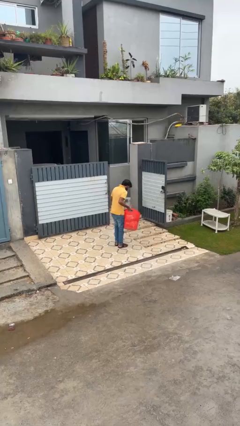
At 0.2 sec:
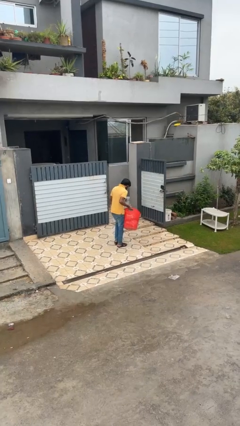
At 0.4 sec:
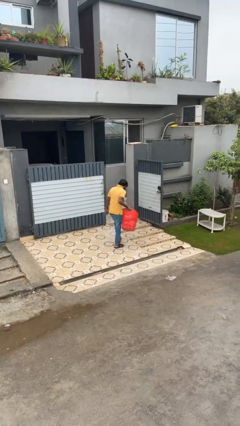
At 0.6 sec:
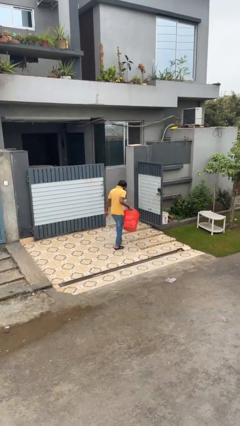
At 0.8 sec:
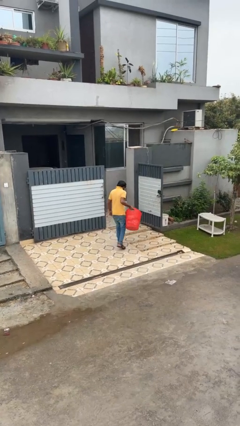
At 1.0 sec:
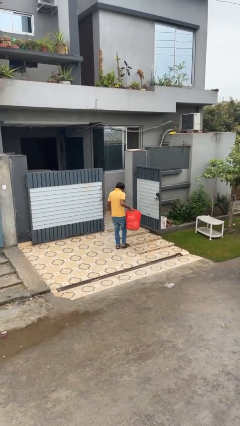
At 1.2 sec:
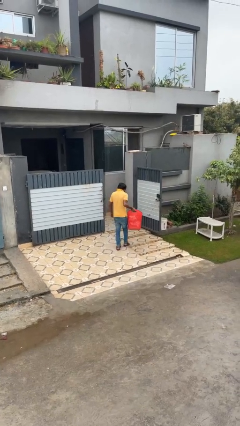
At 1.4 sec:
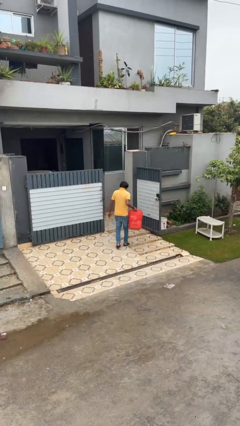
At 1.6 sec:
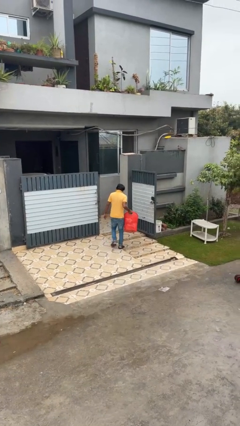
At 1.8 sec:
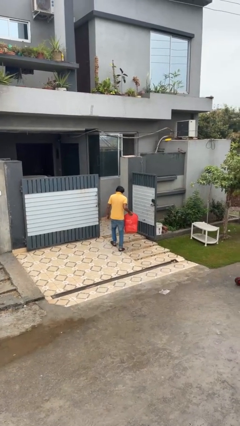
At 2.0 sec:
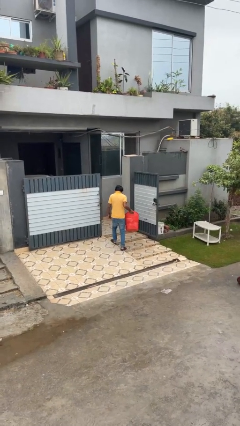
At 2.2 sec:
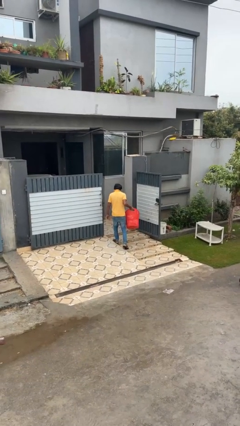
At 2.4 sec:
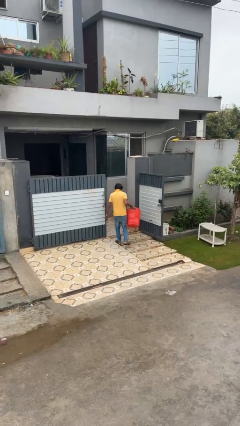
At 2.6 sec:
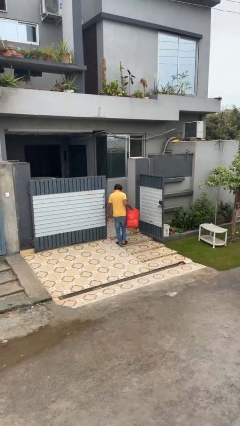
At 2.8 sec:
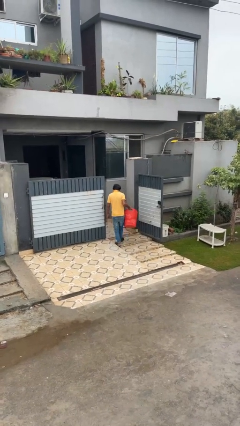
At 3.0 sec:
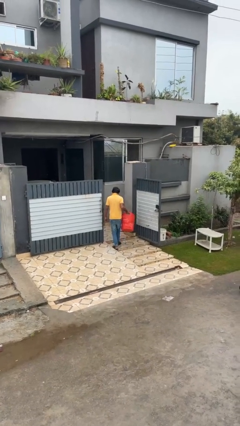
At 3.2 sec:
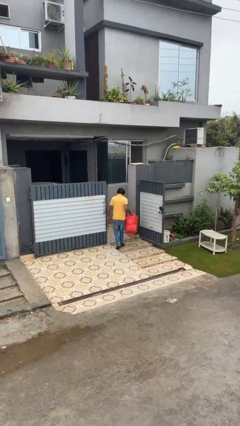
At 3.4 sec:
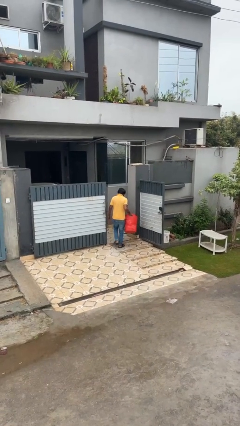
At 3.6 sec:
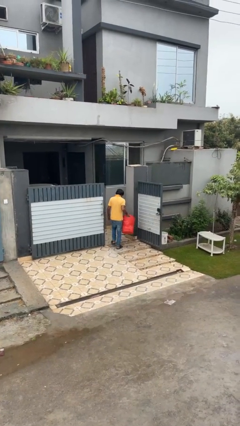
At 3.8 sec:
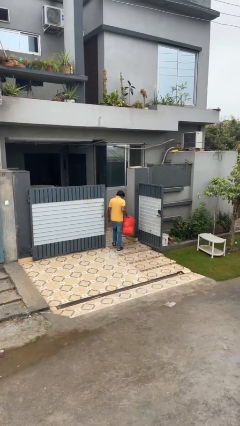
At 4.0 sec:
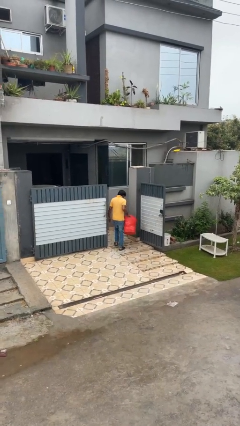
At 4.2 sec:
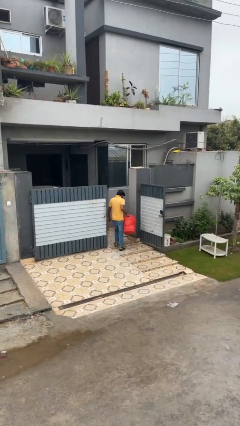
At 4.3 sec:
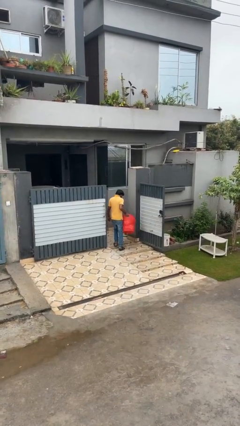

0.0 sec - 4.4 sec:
person carries laundry basket

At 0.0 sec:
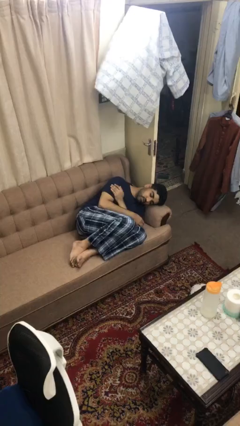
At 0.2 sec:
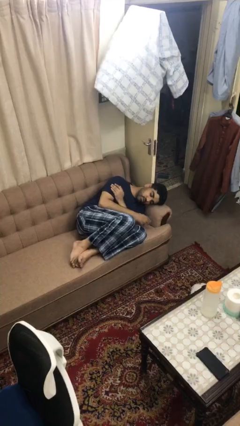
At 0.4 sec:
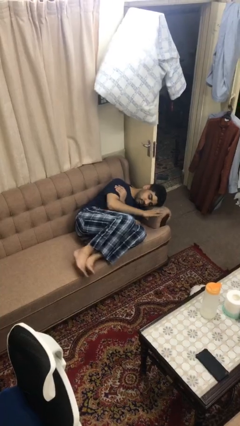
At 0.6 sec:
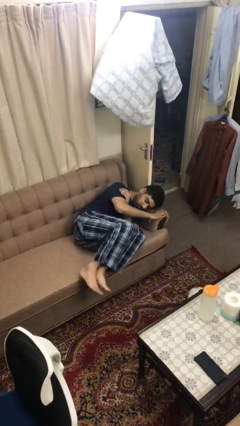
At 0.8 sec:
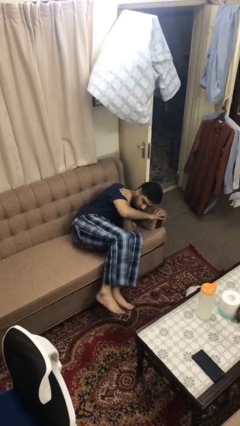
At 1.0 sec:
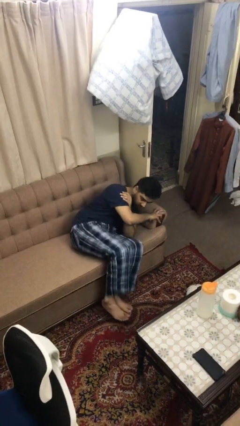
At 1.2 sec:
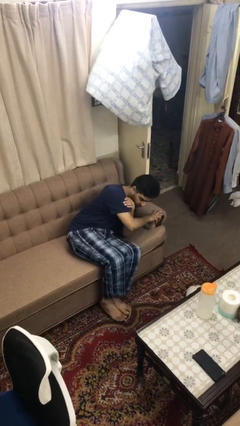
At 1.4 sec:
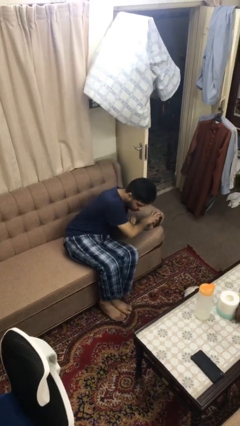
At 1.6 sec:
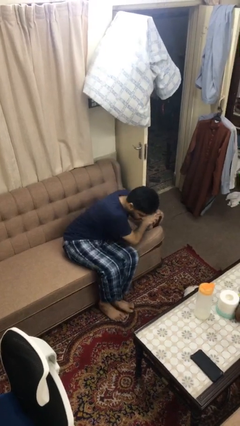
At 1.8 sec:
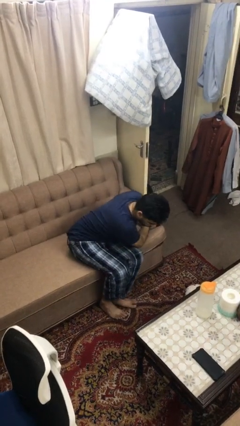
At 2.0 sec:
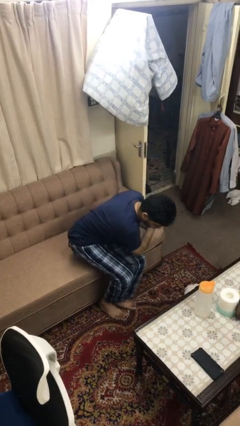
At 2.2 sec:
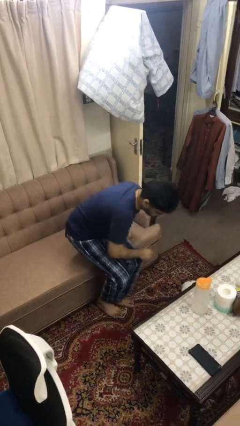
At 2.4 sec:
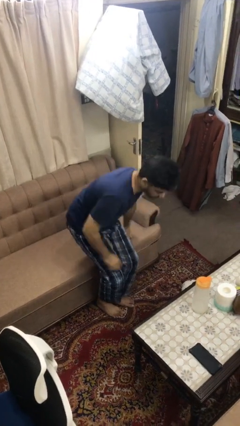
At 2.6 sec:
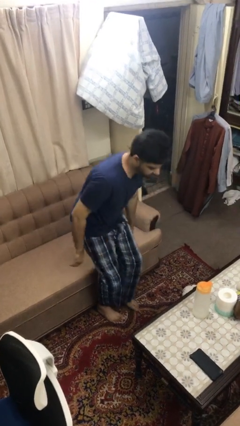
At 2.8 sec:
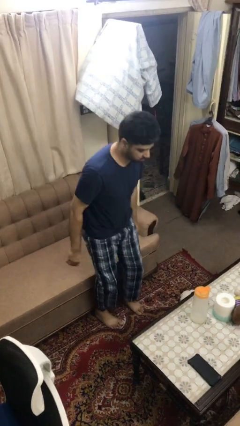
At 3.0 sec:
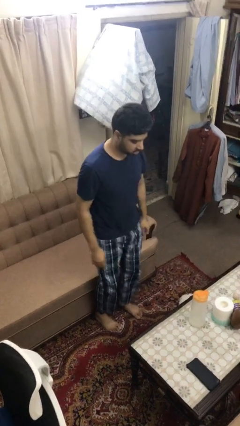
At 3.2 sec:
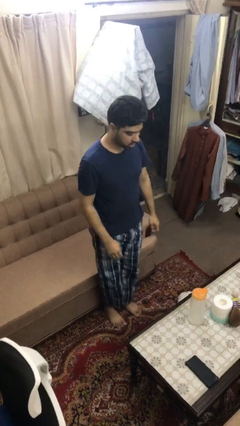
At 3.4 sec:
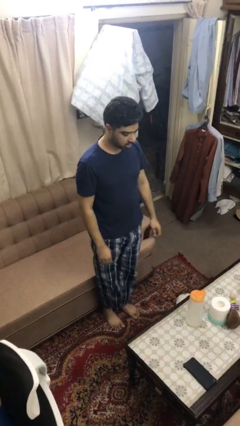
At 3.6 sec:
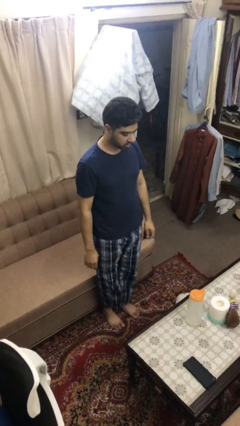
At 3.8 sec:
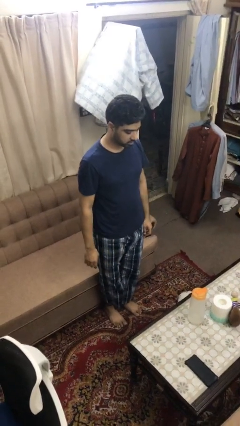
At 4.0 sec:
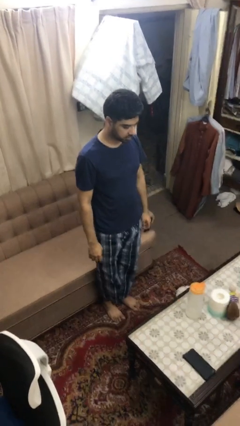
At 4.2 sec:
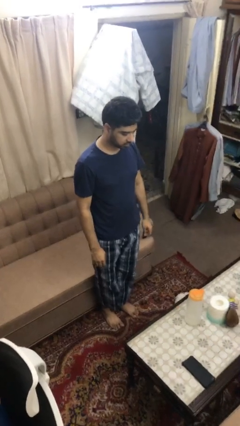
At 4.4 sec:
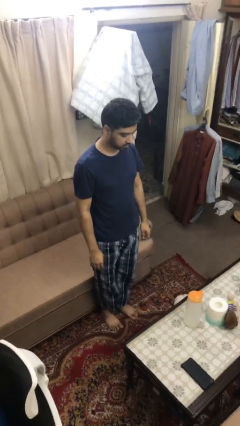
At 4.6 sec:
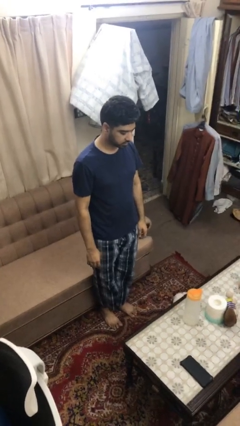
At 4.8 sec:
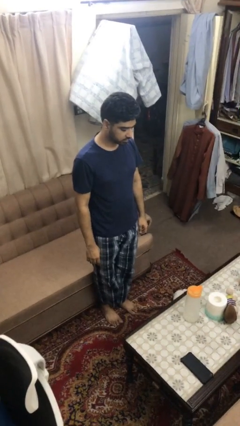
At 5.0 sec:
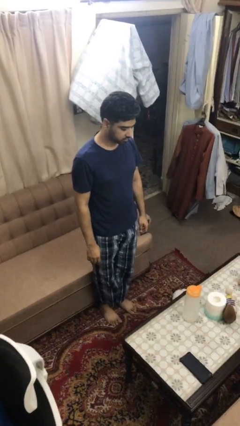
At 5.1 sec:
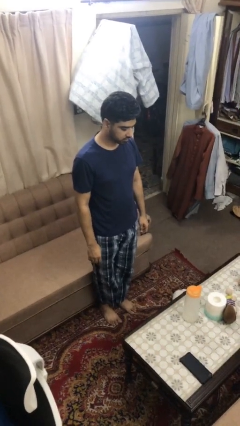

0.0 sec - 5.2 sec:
person stands up

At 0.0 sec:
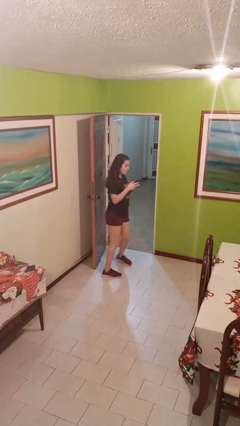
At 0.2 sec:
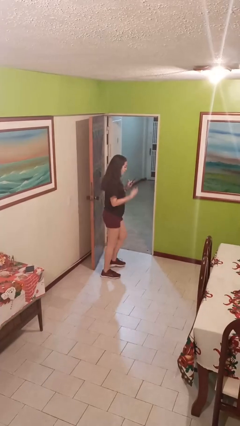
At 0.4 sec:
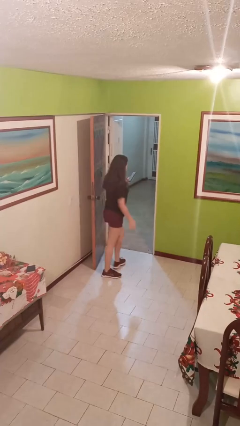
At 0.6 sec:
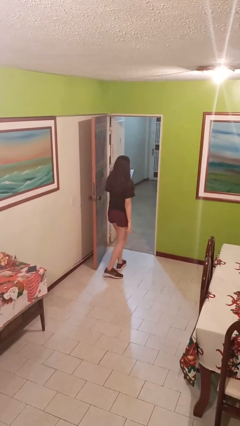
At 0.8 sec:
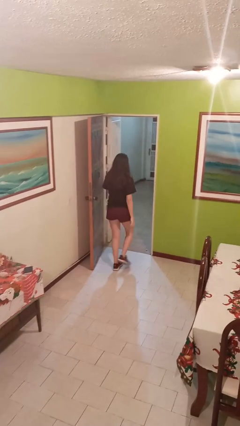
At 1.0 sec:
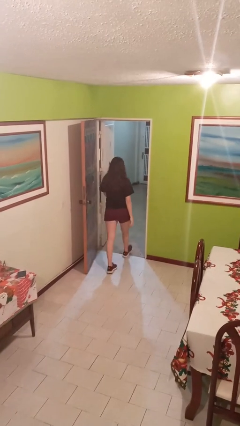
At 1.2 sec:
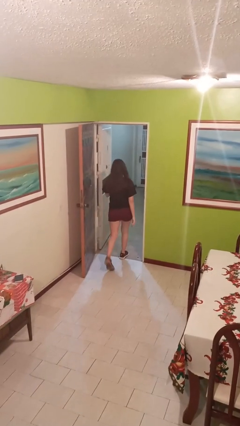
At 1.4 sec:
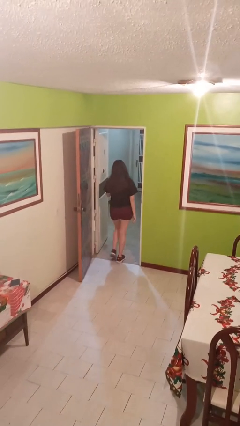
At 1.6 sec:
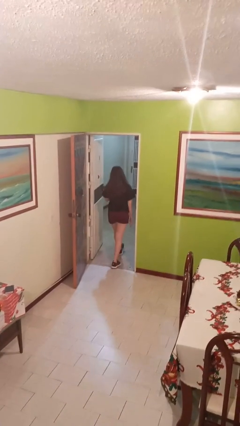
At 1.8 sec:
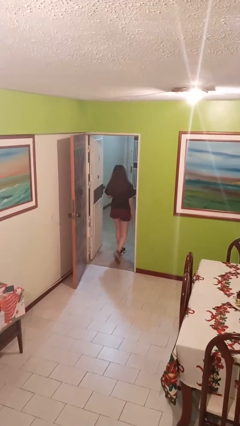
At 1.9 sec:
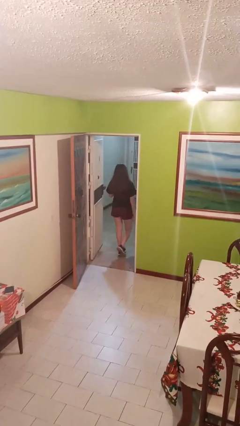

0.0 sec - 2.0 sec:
person exits scene through structure

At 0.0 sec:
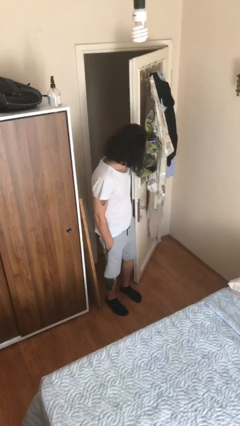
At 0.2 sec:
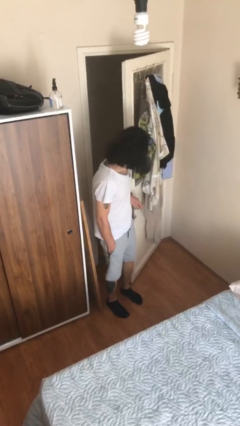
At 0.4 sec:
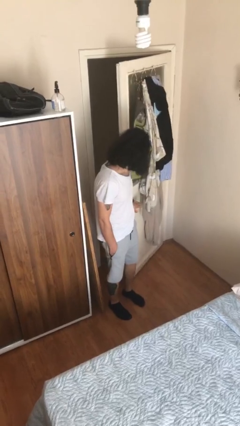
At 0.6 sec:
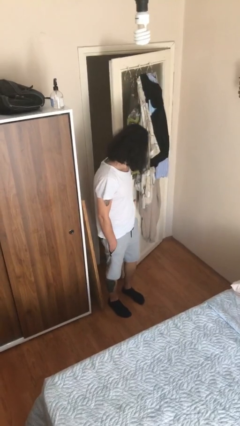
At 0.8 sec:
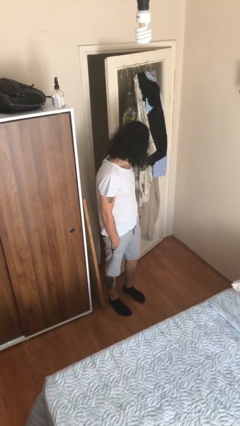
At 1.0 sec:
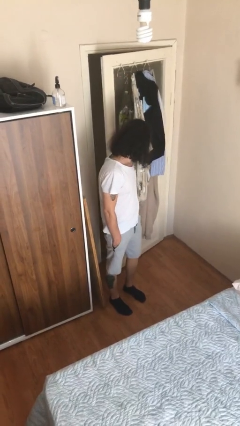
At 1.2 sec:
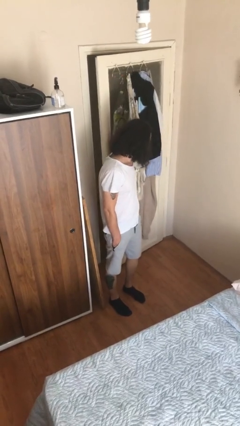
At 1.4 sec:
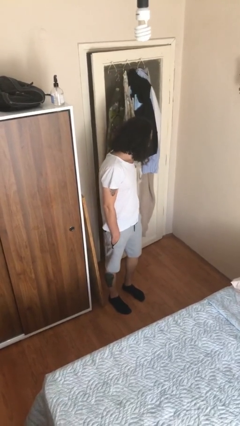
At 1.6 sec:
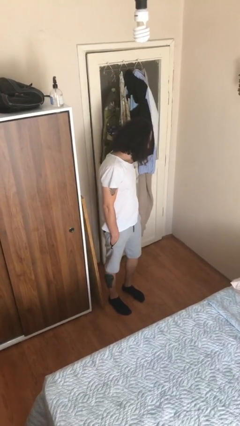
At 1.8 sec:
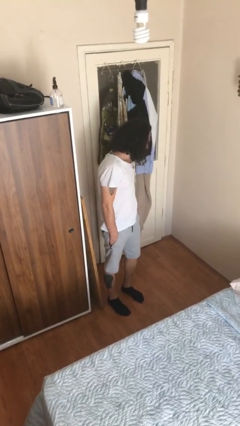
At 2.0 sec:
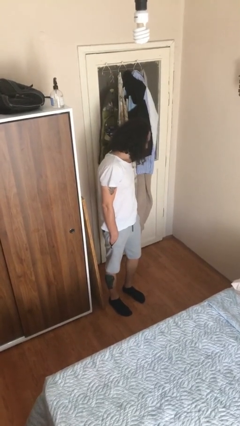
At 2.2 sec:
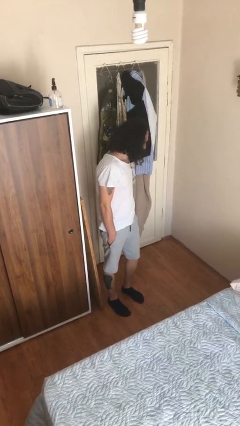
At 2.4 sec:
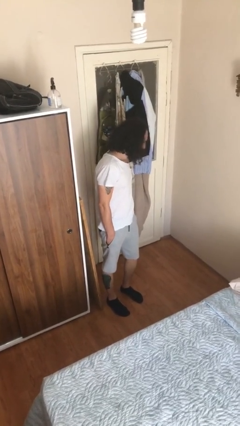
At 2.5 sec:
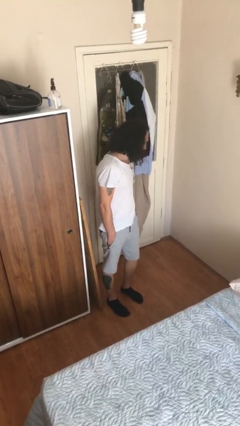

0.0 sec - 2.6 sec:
person closes facility door

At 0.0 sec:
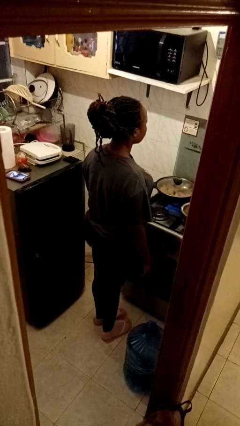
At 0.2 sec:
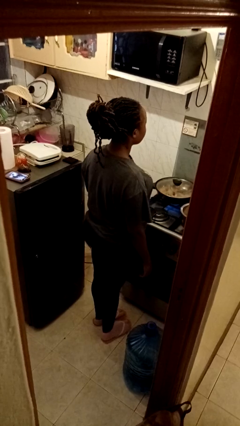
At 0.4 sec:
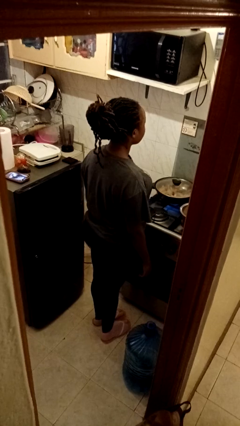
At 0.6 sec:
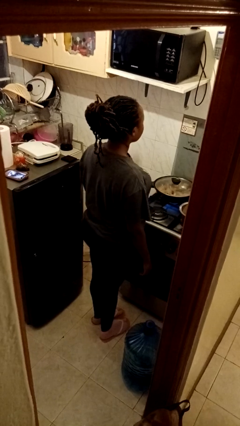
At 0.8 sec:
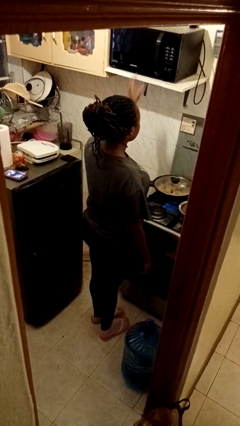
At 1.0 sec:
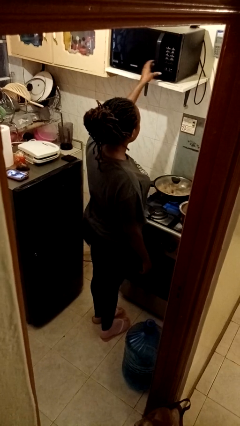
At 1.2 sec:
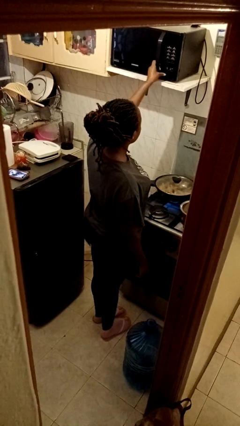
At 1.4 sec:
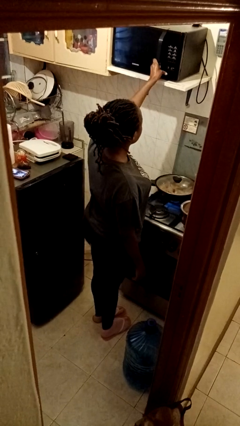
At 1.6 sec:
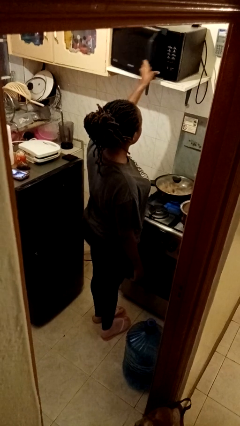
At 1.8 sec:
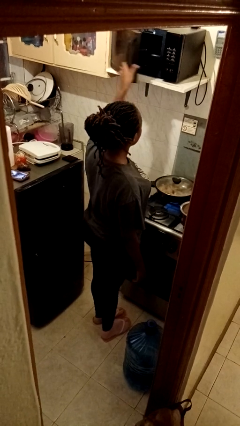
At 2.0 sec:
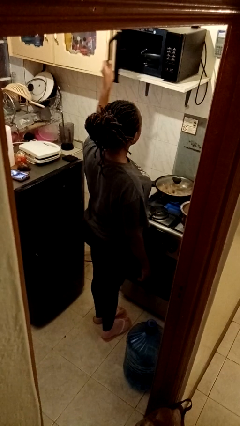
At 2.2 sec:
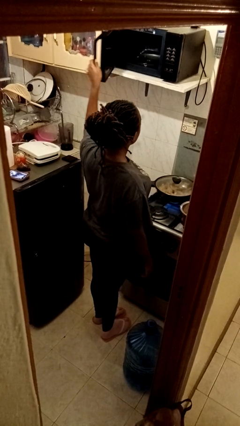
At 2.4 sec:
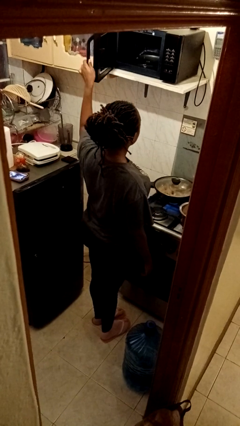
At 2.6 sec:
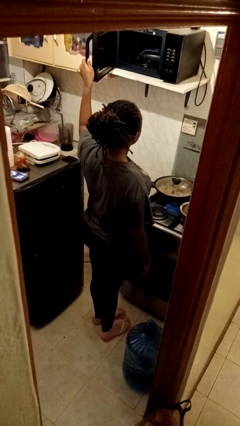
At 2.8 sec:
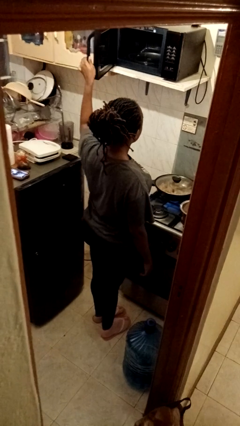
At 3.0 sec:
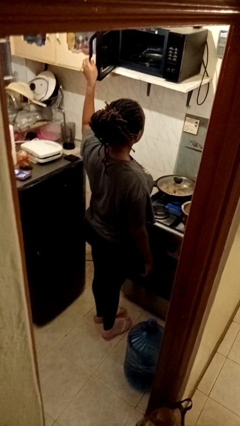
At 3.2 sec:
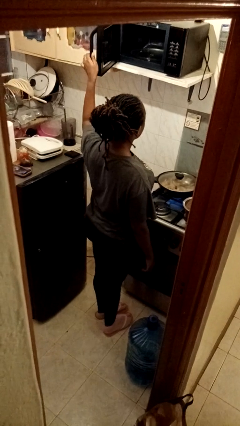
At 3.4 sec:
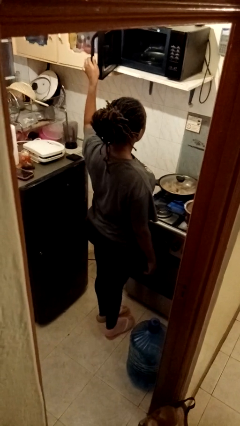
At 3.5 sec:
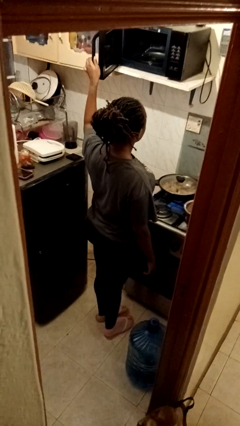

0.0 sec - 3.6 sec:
person opens microwave
